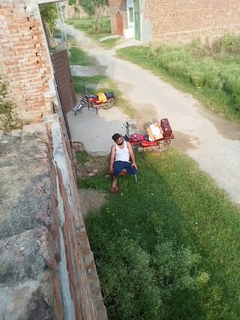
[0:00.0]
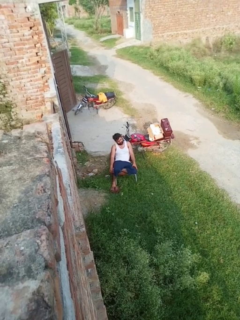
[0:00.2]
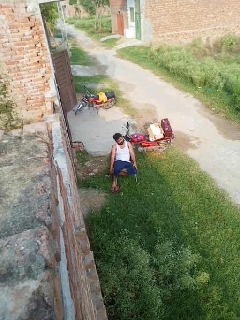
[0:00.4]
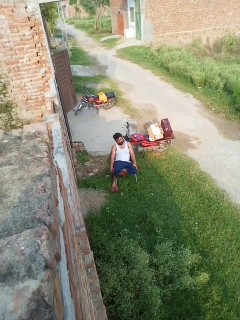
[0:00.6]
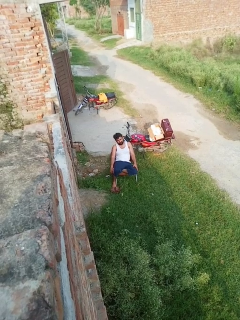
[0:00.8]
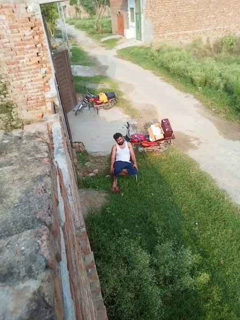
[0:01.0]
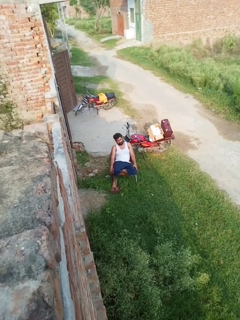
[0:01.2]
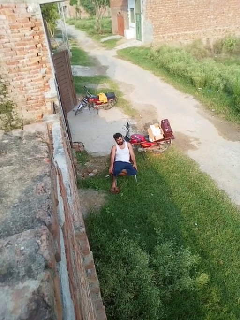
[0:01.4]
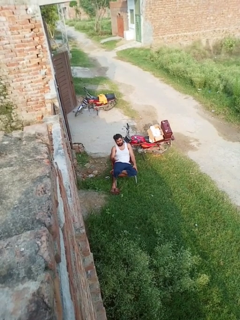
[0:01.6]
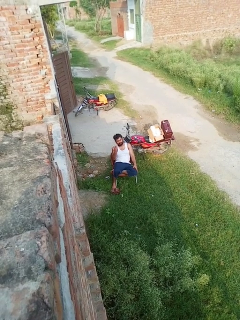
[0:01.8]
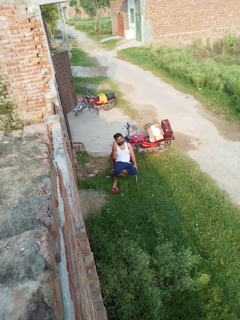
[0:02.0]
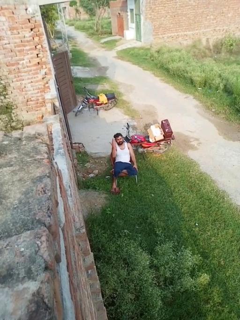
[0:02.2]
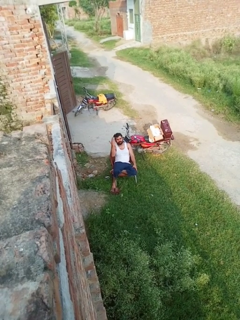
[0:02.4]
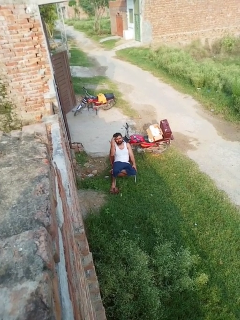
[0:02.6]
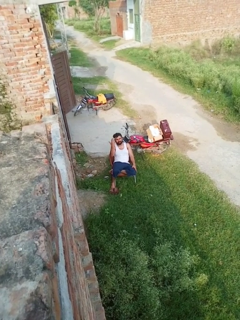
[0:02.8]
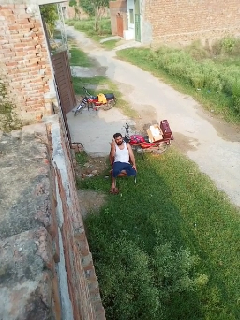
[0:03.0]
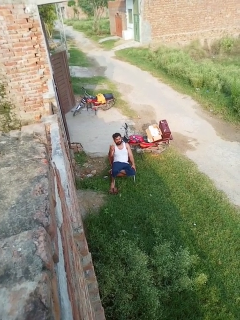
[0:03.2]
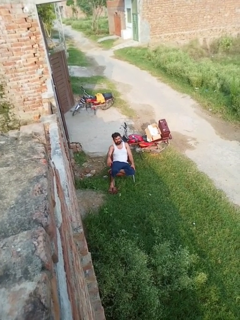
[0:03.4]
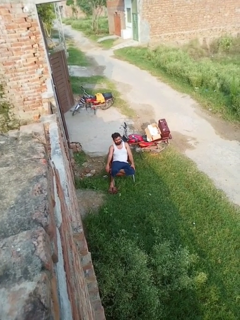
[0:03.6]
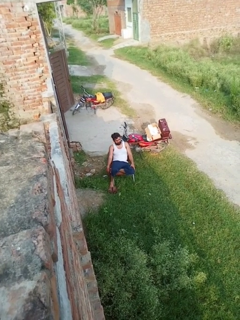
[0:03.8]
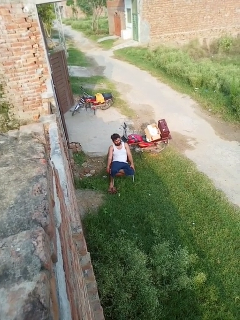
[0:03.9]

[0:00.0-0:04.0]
person gestures raise hand

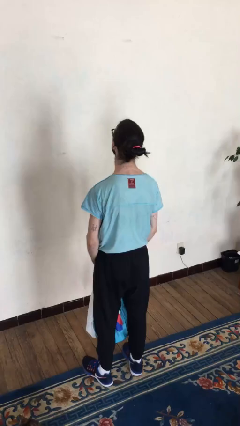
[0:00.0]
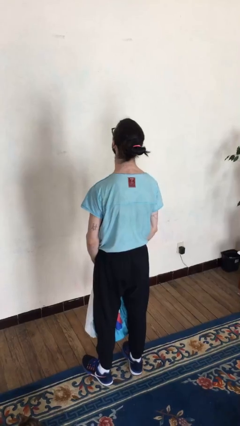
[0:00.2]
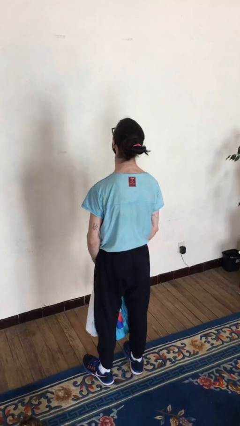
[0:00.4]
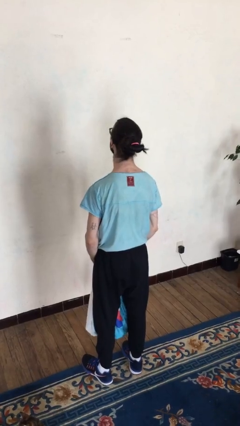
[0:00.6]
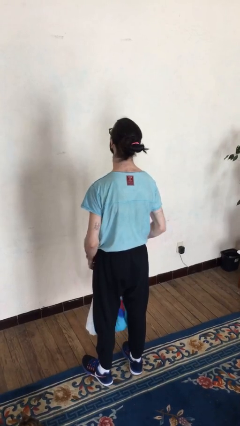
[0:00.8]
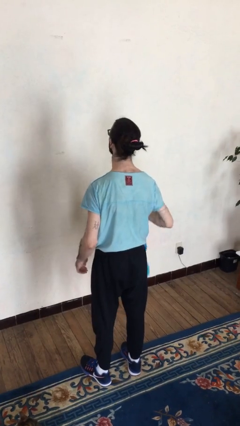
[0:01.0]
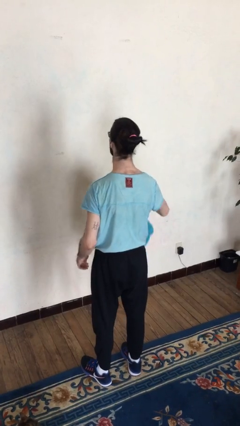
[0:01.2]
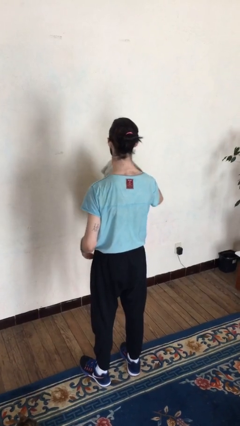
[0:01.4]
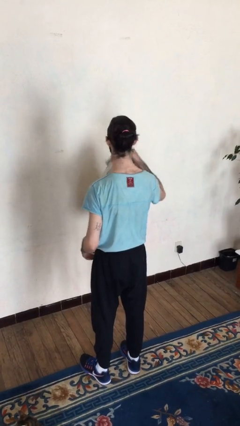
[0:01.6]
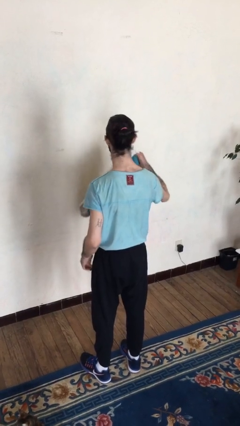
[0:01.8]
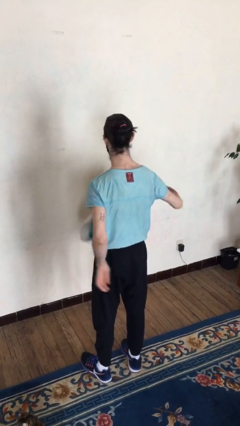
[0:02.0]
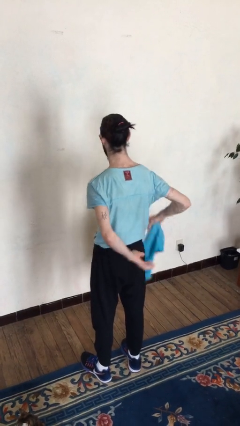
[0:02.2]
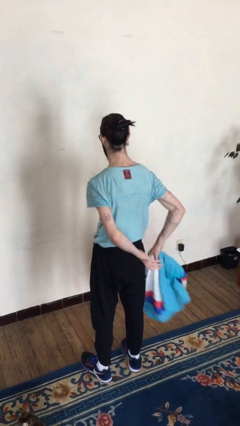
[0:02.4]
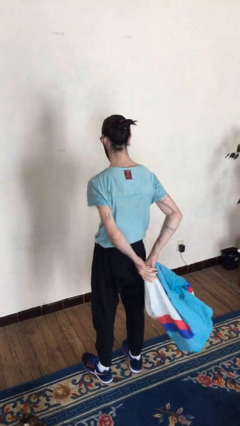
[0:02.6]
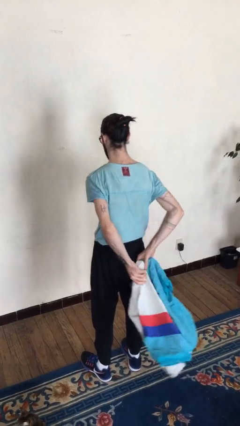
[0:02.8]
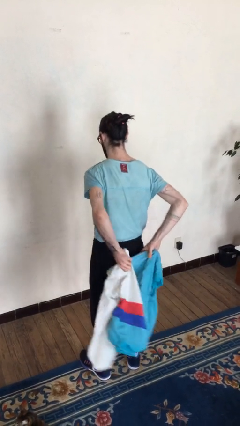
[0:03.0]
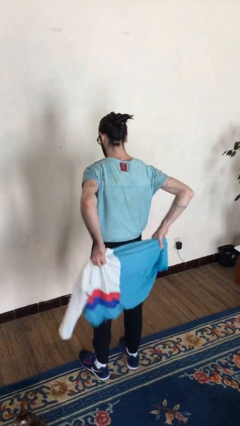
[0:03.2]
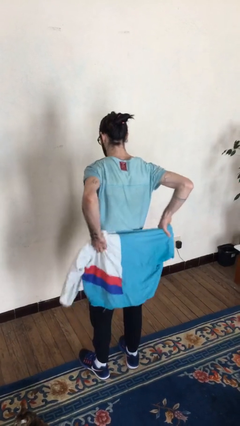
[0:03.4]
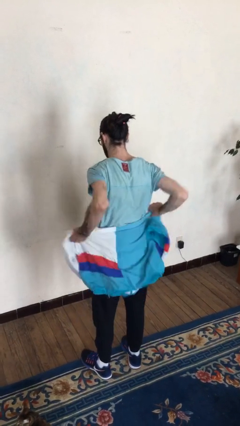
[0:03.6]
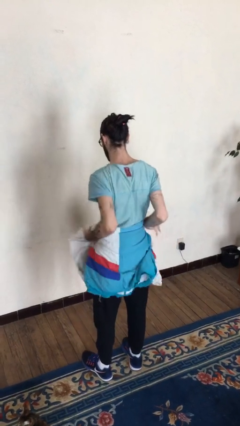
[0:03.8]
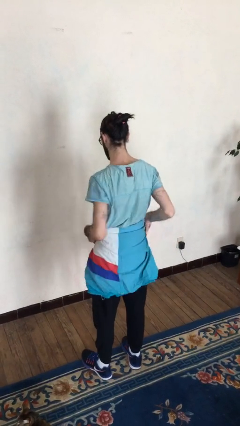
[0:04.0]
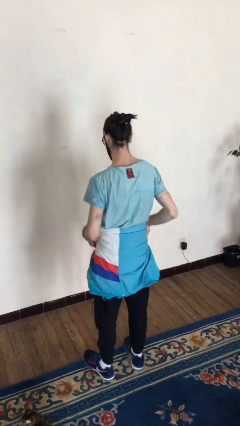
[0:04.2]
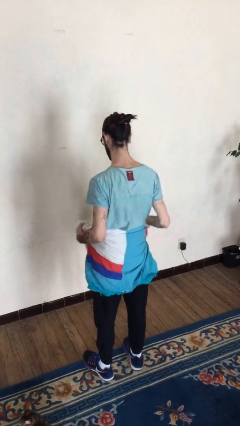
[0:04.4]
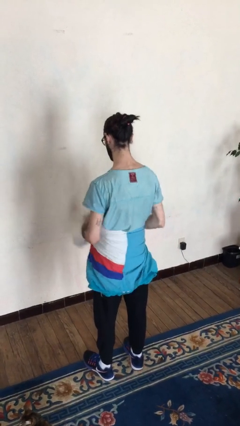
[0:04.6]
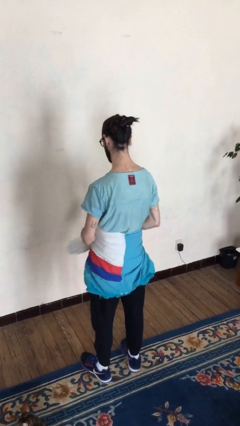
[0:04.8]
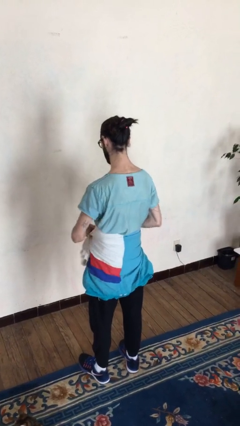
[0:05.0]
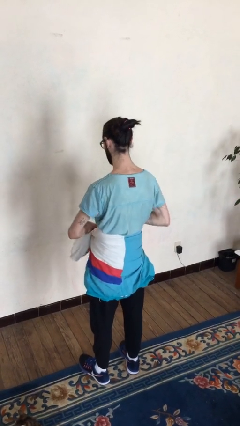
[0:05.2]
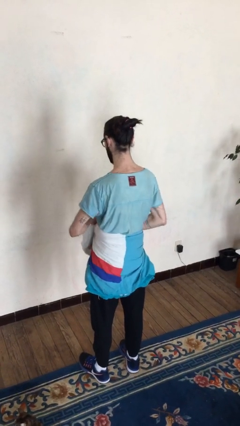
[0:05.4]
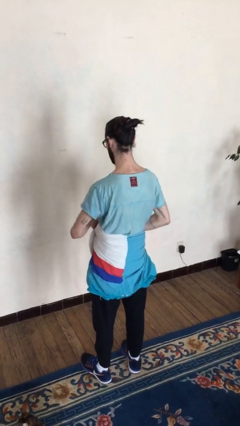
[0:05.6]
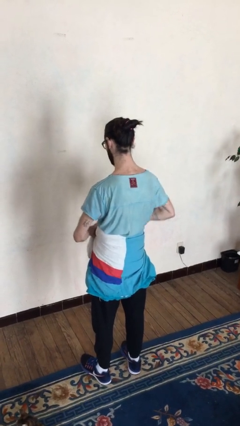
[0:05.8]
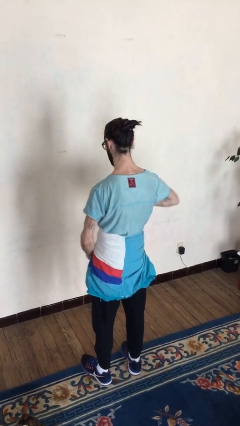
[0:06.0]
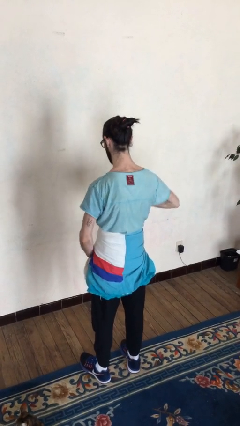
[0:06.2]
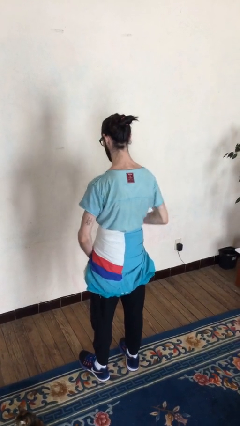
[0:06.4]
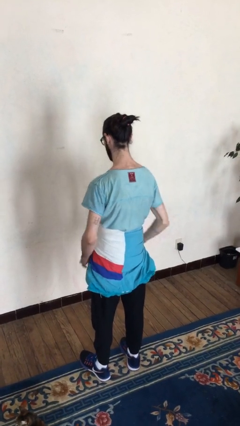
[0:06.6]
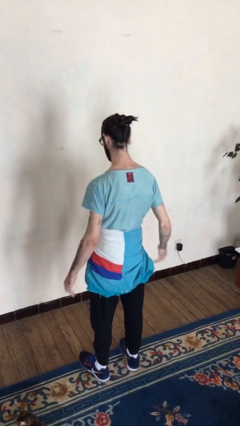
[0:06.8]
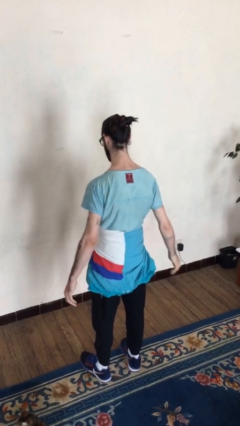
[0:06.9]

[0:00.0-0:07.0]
person ties jacket around waist

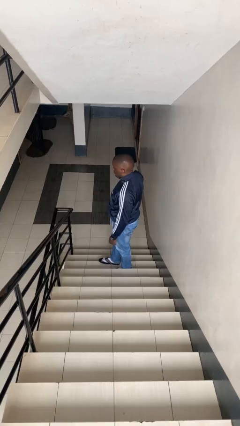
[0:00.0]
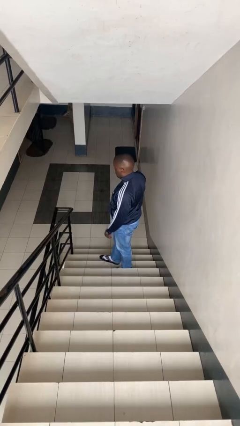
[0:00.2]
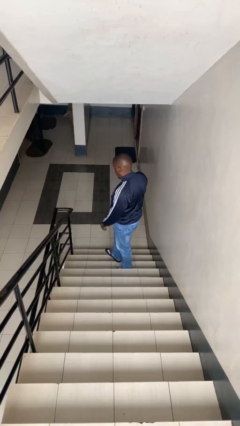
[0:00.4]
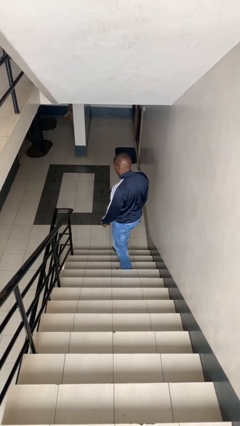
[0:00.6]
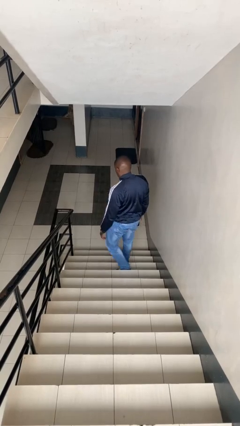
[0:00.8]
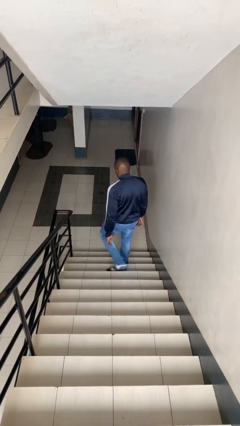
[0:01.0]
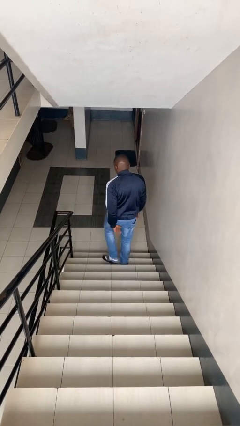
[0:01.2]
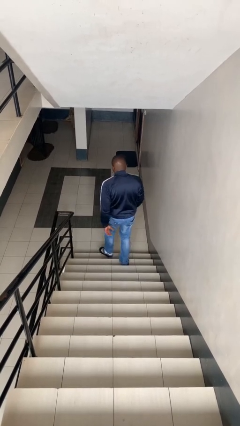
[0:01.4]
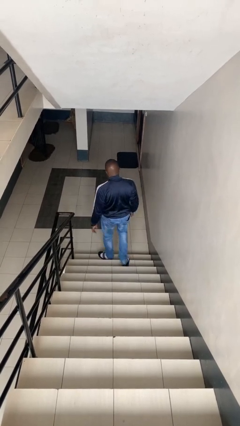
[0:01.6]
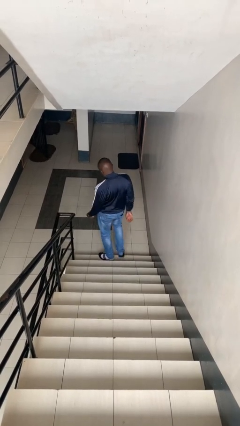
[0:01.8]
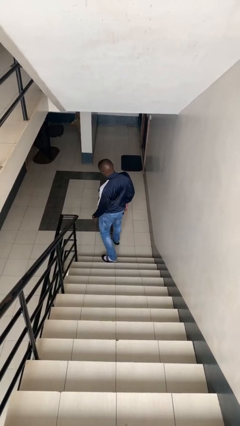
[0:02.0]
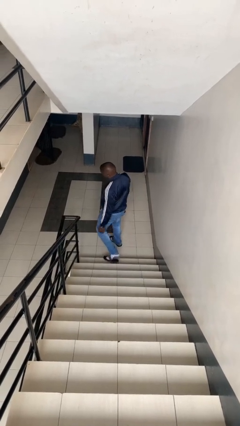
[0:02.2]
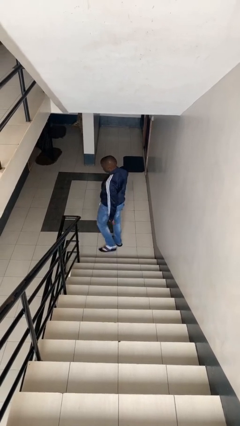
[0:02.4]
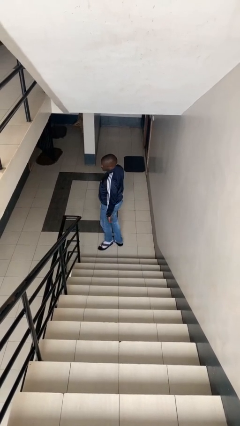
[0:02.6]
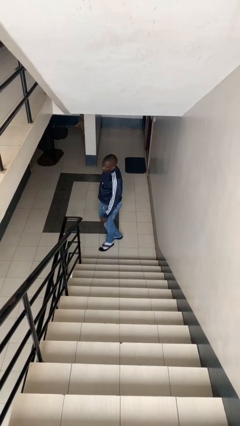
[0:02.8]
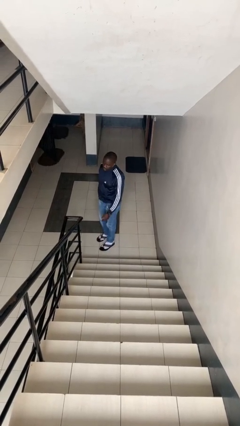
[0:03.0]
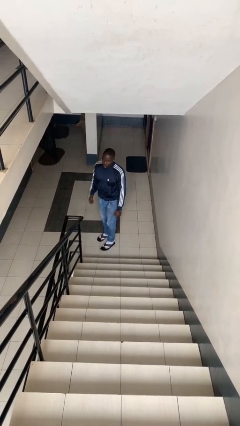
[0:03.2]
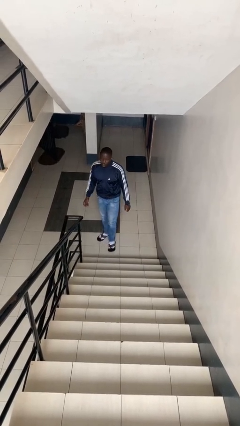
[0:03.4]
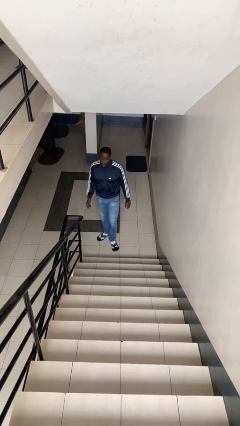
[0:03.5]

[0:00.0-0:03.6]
person climbs down stairs

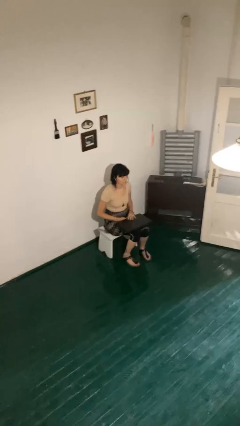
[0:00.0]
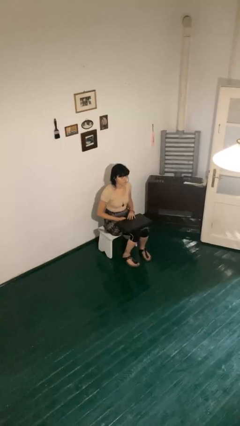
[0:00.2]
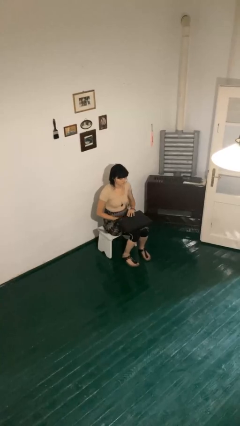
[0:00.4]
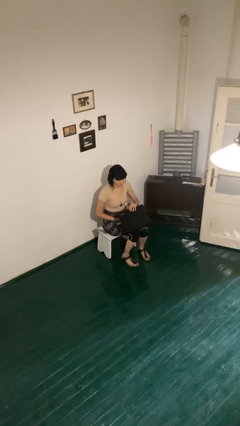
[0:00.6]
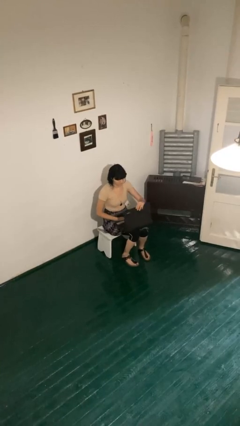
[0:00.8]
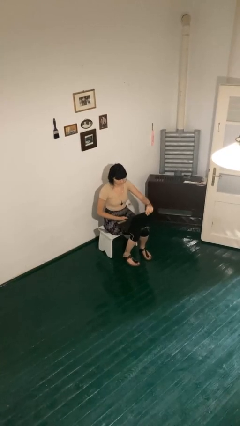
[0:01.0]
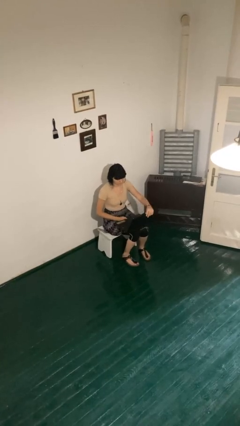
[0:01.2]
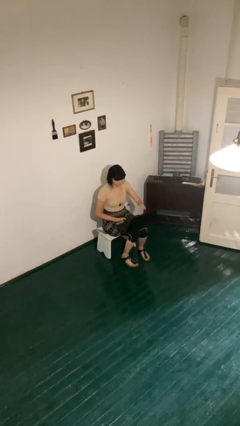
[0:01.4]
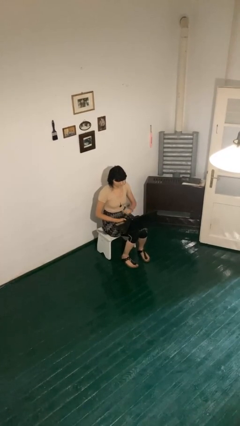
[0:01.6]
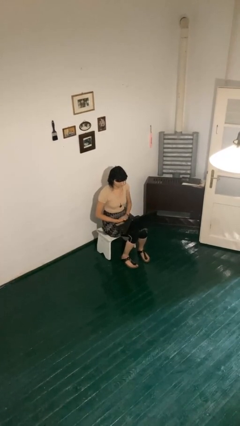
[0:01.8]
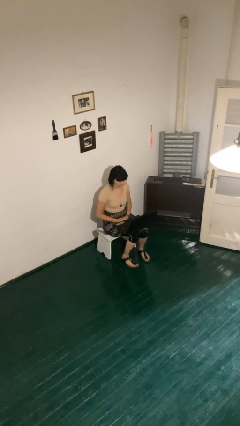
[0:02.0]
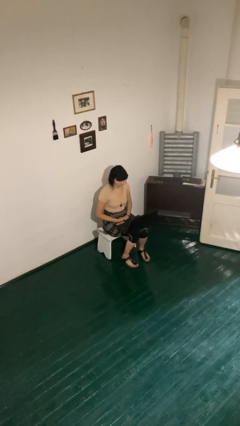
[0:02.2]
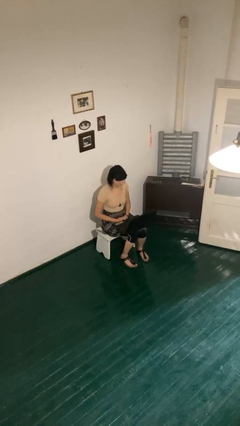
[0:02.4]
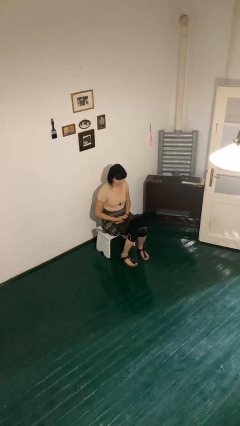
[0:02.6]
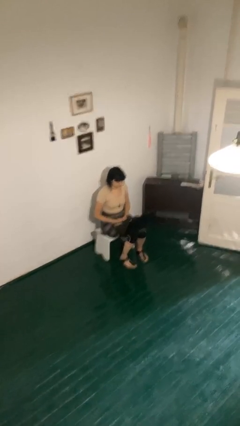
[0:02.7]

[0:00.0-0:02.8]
person opens laptop

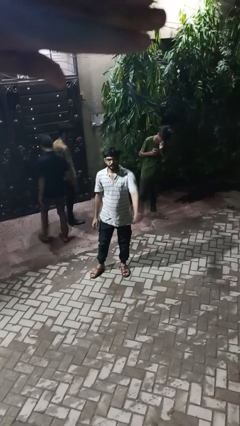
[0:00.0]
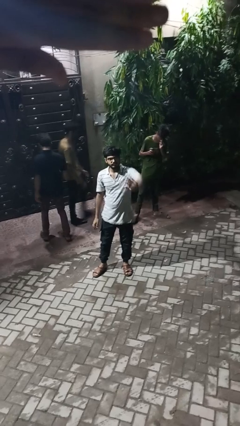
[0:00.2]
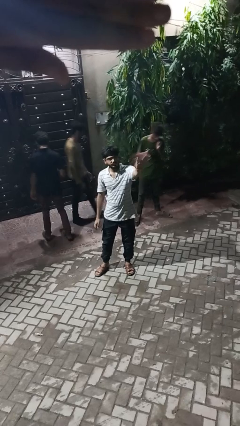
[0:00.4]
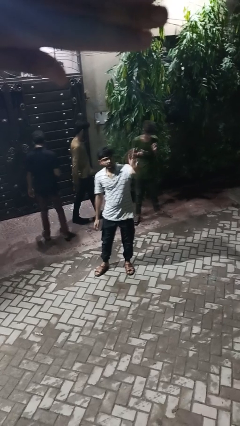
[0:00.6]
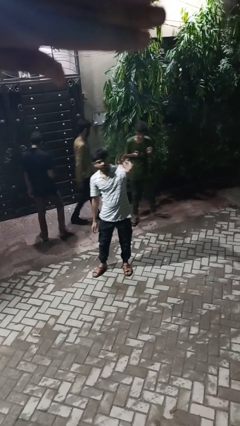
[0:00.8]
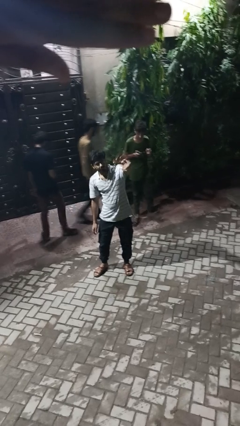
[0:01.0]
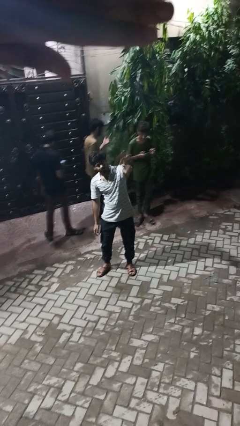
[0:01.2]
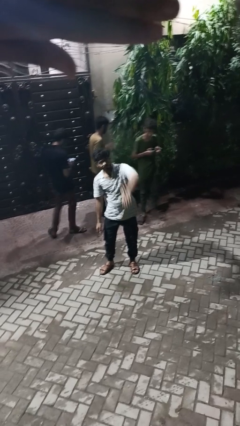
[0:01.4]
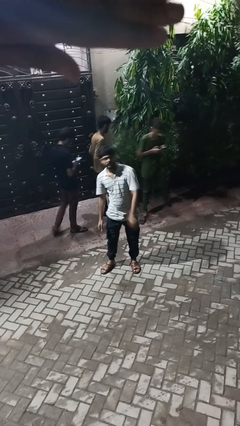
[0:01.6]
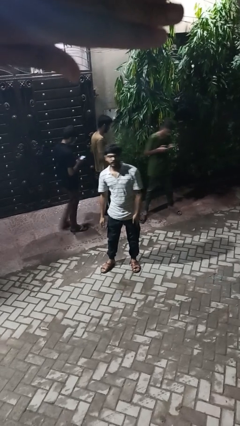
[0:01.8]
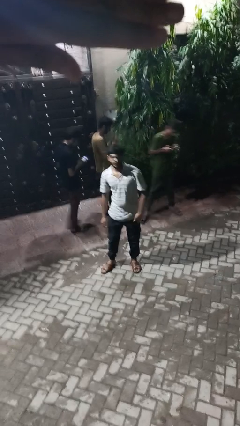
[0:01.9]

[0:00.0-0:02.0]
person waves at person
